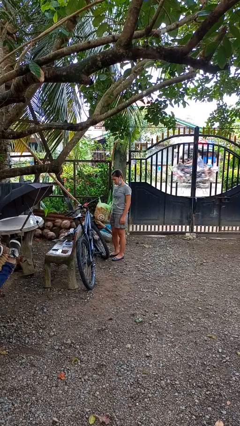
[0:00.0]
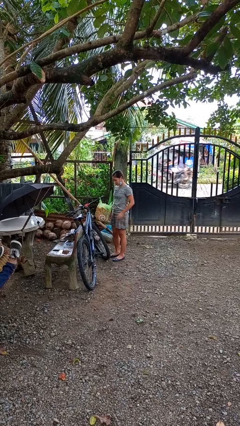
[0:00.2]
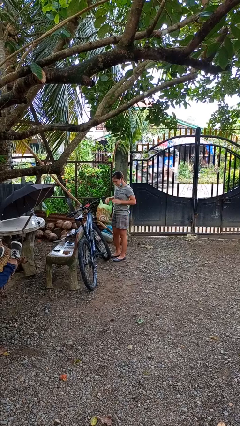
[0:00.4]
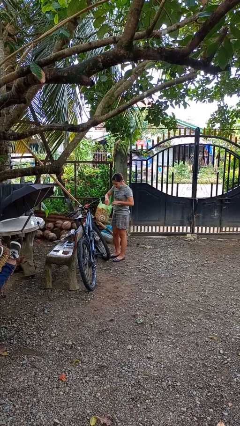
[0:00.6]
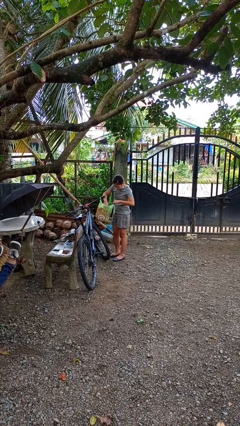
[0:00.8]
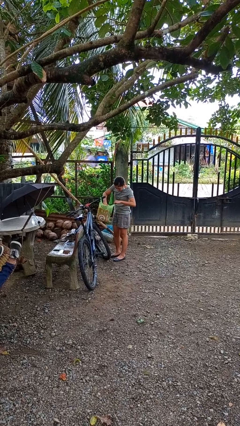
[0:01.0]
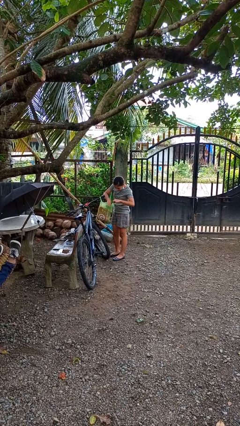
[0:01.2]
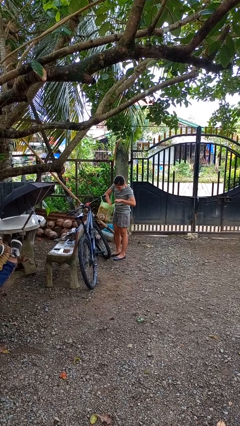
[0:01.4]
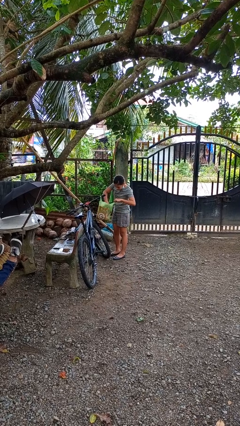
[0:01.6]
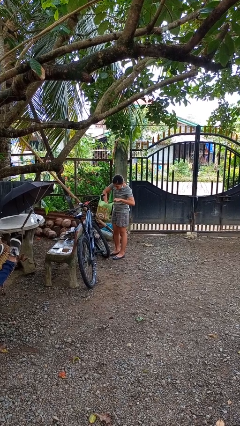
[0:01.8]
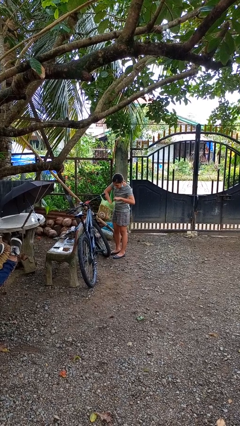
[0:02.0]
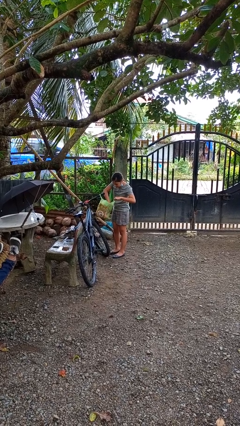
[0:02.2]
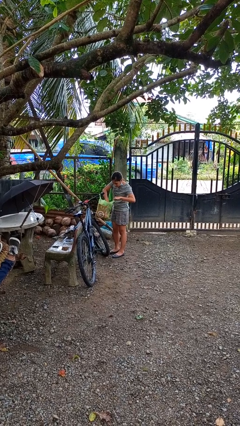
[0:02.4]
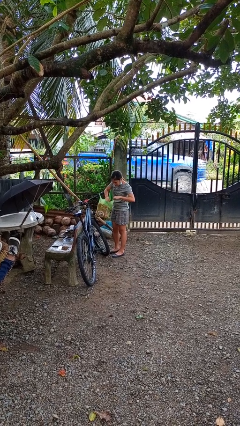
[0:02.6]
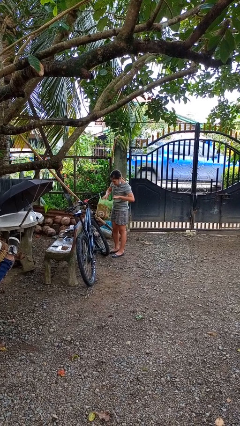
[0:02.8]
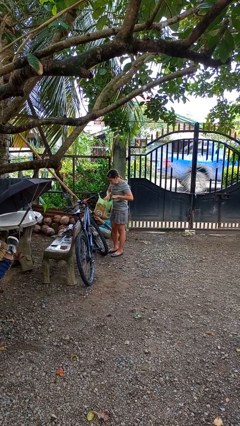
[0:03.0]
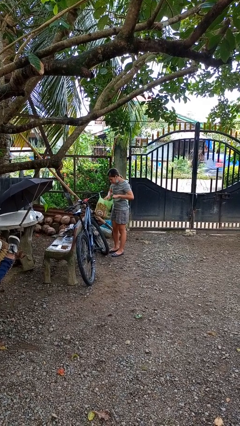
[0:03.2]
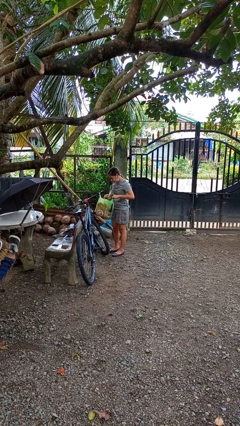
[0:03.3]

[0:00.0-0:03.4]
person searches in bag

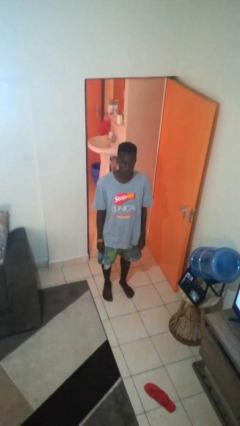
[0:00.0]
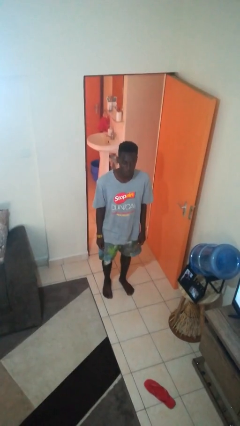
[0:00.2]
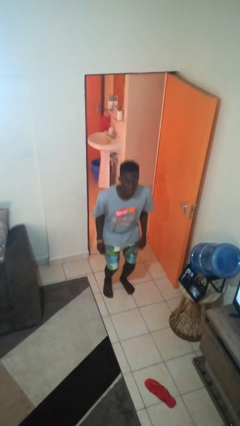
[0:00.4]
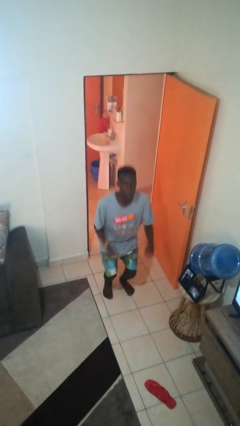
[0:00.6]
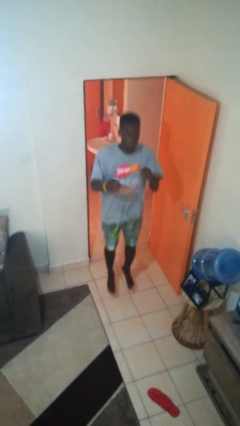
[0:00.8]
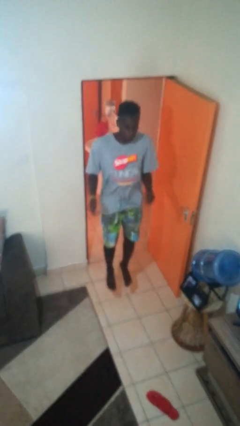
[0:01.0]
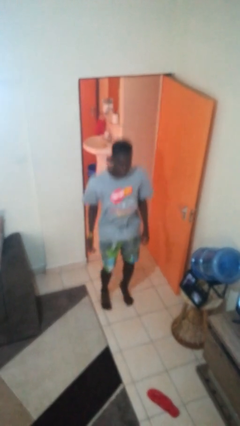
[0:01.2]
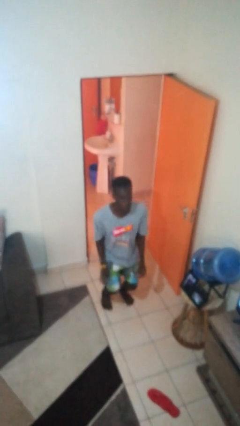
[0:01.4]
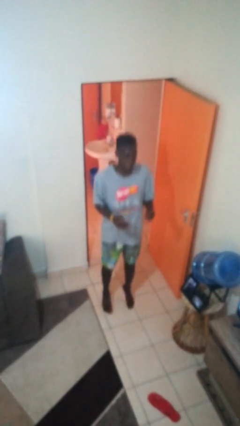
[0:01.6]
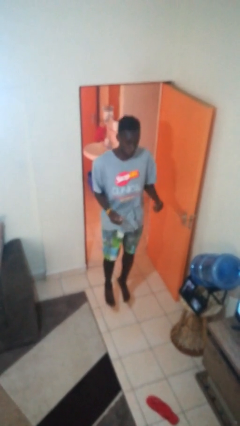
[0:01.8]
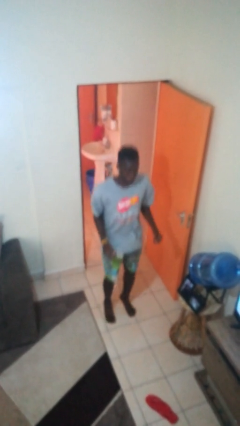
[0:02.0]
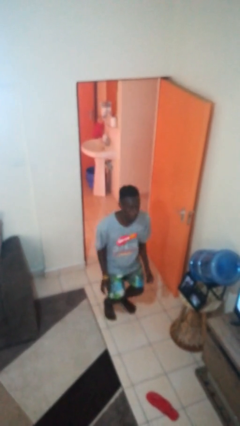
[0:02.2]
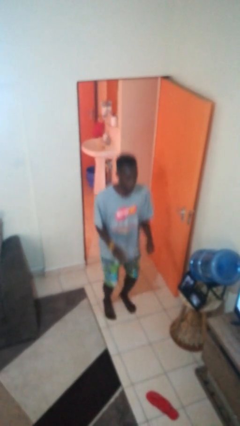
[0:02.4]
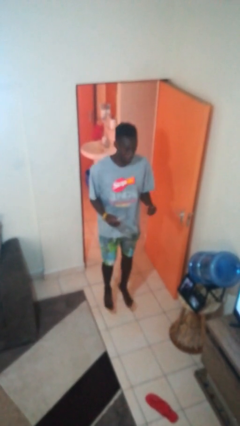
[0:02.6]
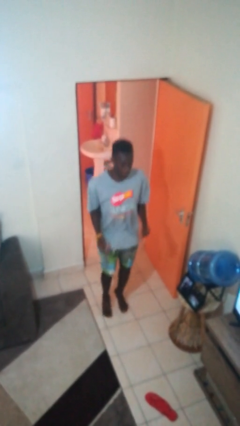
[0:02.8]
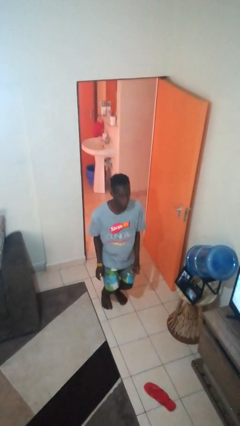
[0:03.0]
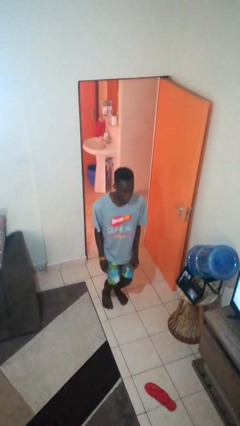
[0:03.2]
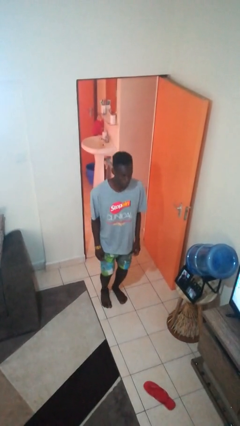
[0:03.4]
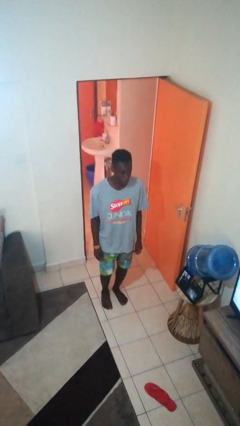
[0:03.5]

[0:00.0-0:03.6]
person jumps

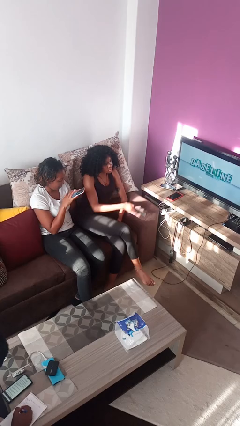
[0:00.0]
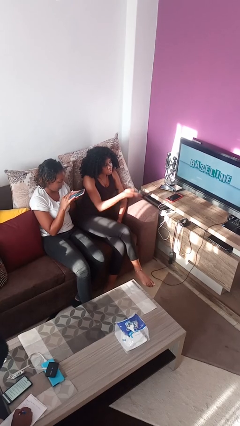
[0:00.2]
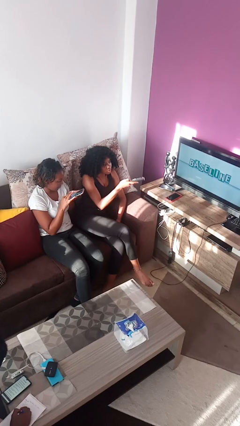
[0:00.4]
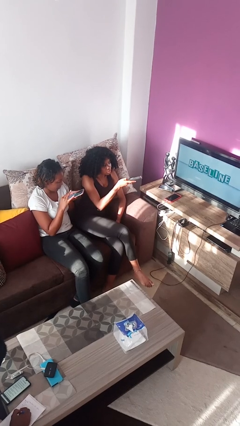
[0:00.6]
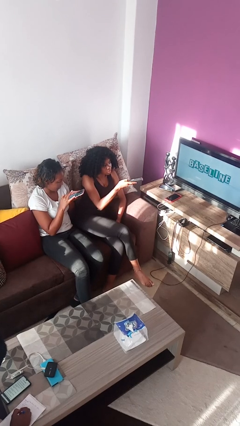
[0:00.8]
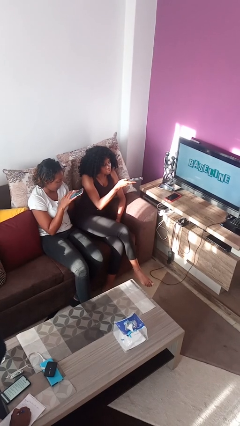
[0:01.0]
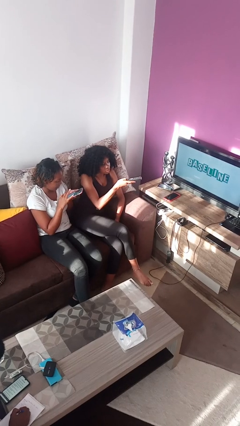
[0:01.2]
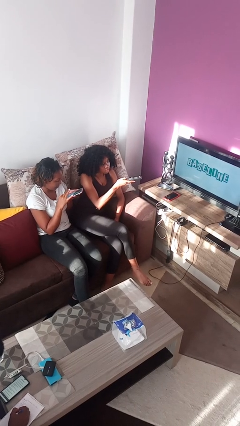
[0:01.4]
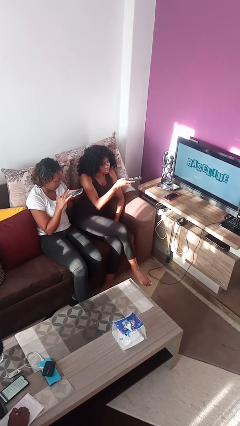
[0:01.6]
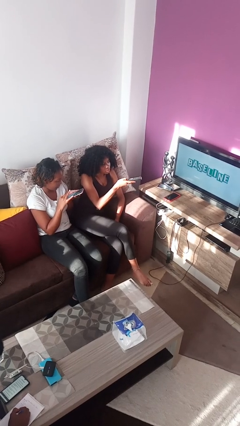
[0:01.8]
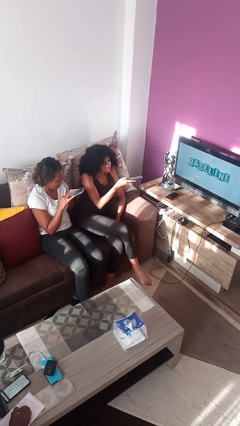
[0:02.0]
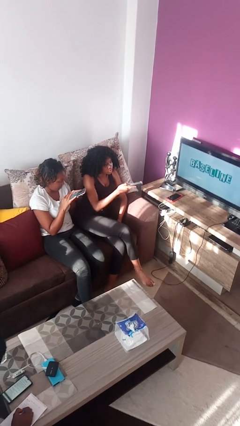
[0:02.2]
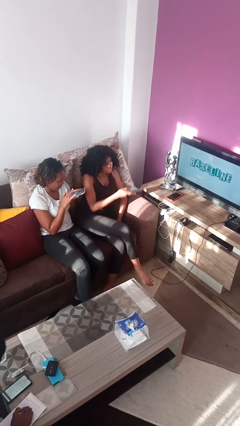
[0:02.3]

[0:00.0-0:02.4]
person uses television remote

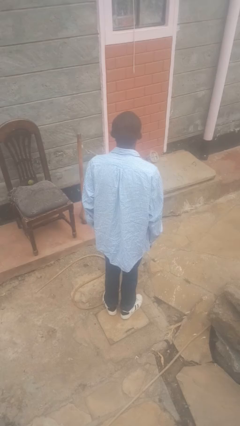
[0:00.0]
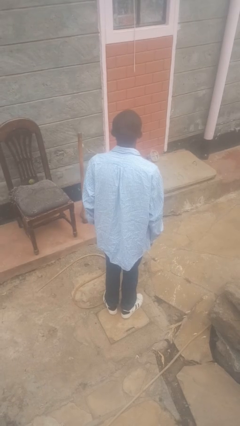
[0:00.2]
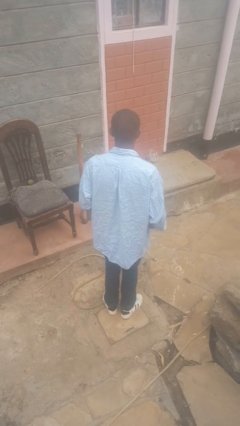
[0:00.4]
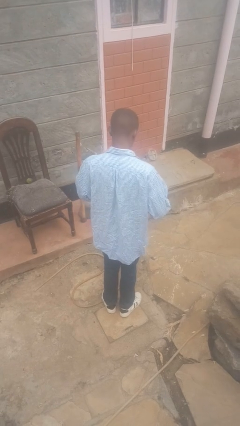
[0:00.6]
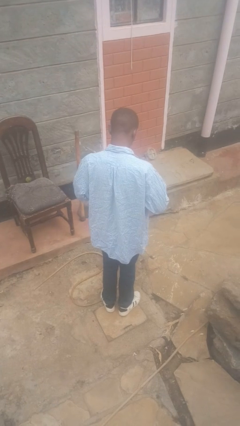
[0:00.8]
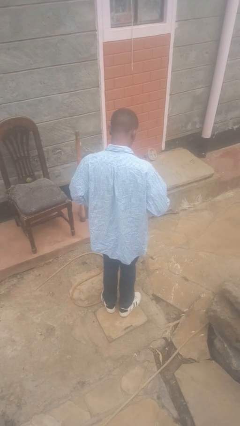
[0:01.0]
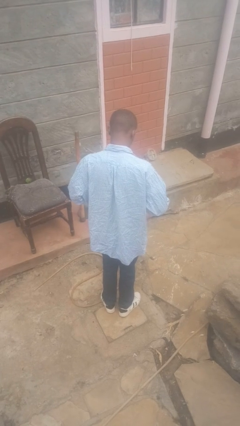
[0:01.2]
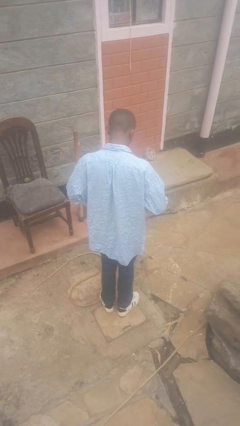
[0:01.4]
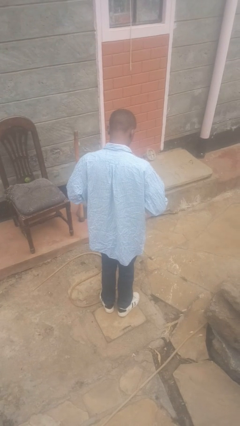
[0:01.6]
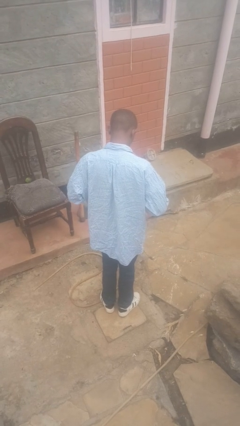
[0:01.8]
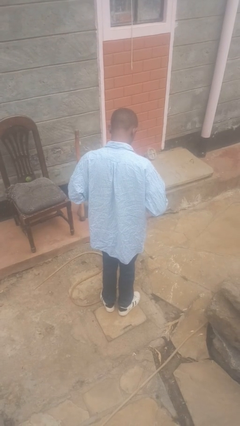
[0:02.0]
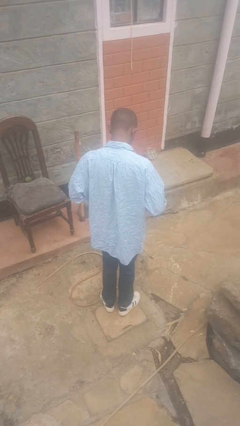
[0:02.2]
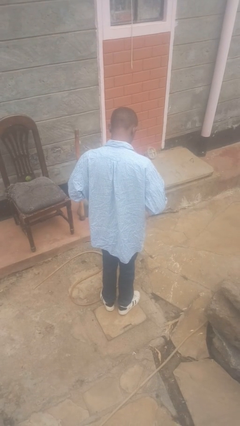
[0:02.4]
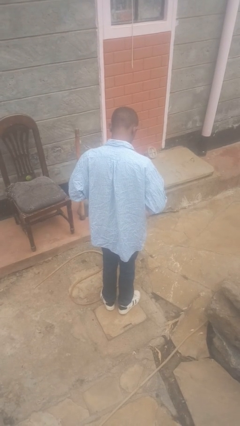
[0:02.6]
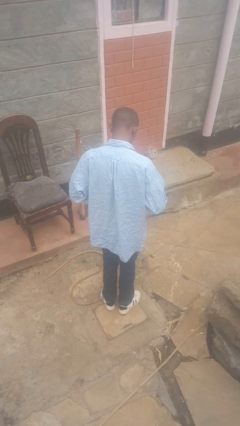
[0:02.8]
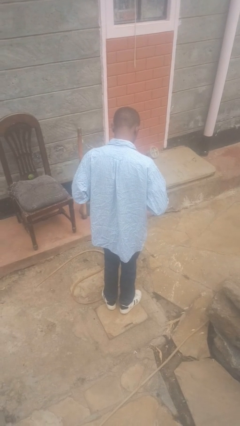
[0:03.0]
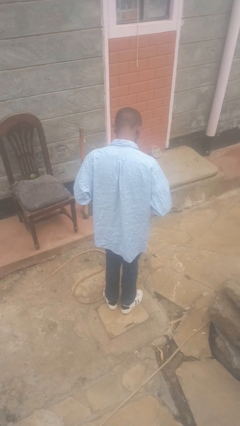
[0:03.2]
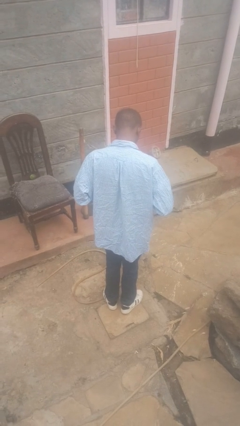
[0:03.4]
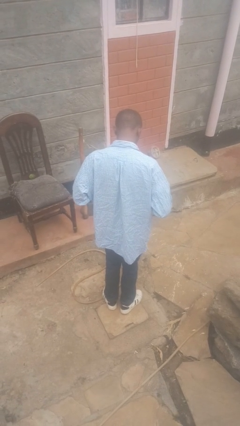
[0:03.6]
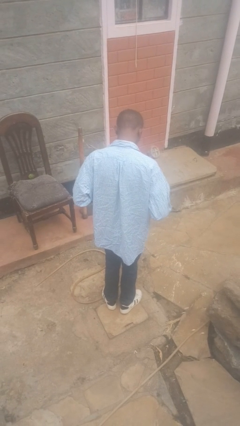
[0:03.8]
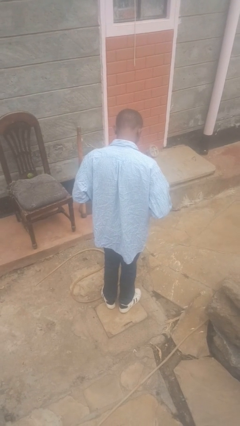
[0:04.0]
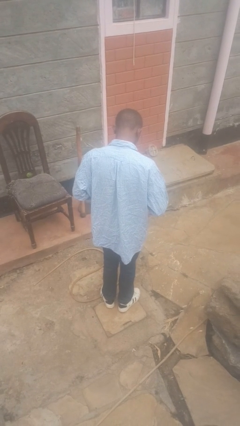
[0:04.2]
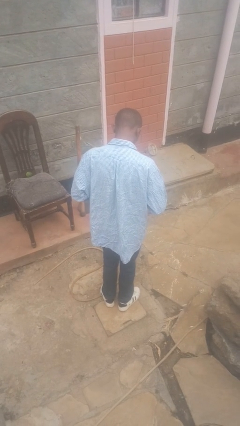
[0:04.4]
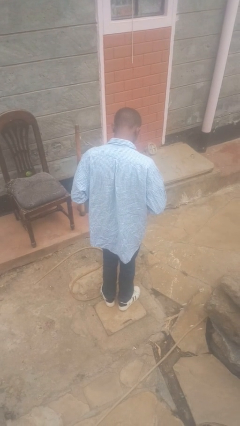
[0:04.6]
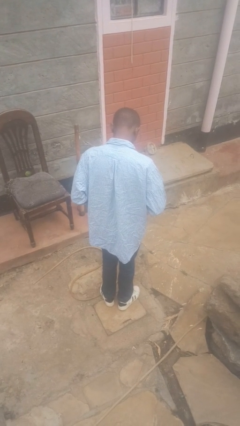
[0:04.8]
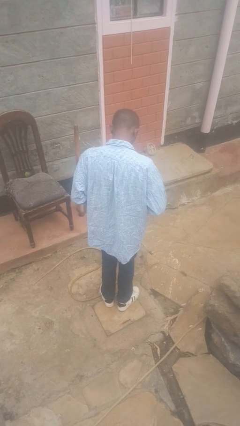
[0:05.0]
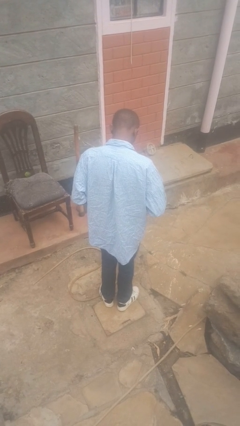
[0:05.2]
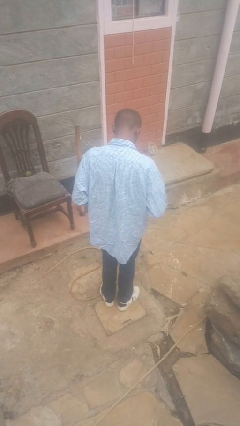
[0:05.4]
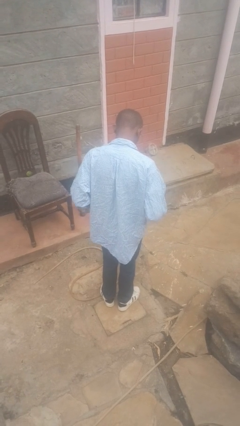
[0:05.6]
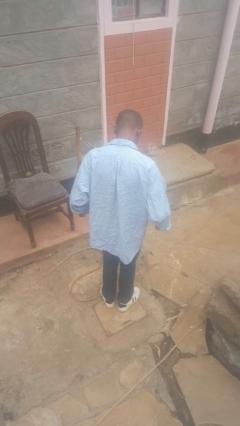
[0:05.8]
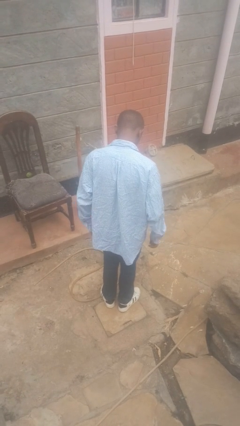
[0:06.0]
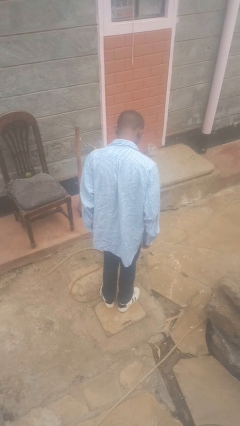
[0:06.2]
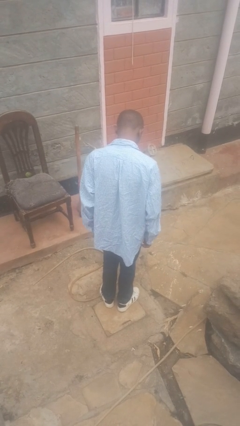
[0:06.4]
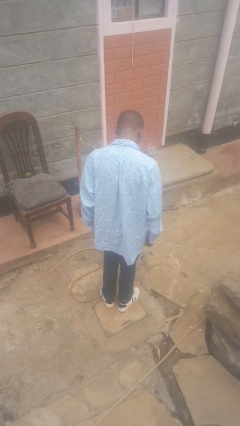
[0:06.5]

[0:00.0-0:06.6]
person unbuttons shirt

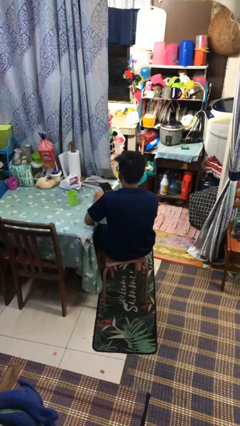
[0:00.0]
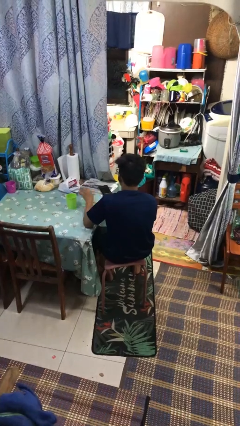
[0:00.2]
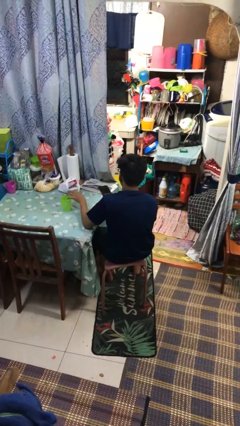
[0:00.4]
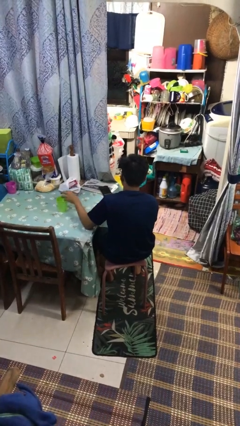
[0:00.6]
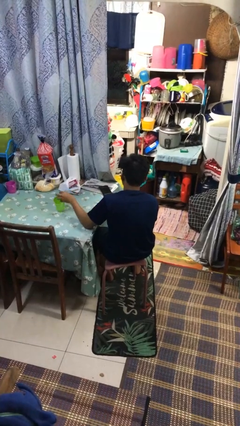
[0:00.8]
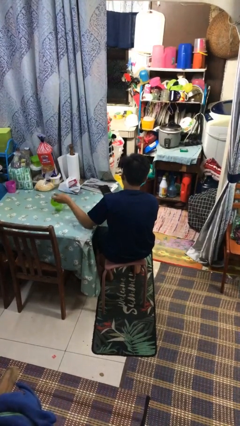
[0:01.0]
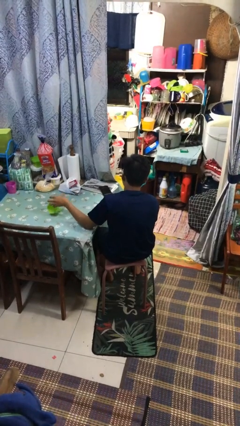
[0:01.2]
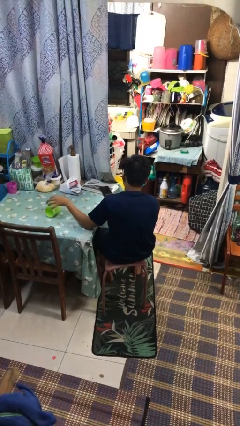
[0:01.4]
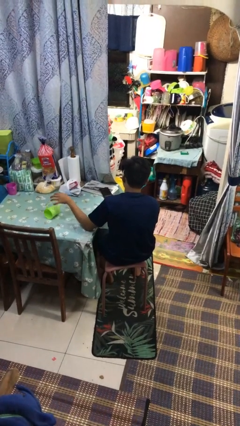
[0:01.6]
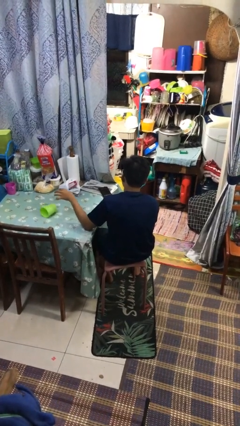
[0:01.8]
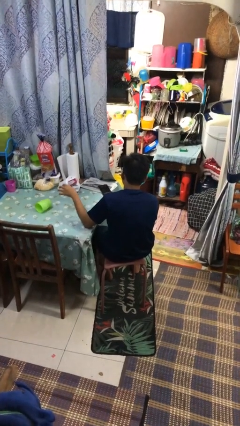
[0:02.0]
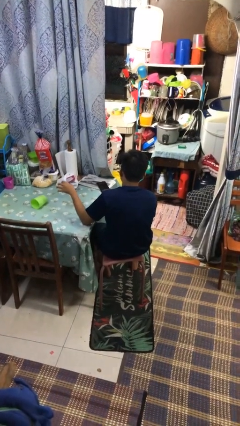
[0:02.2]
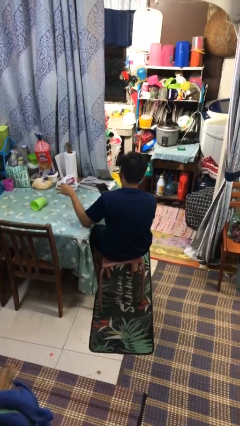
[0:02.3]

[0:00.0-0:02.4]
person knocks over glass
